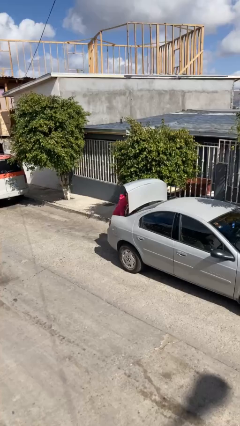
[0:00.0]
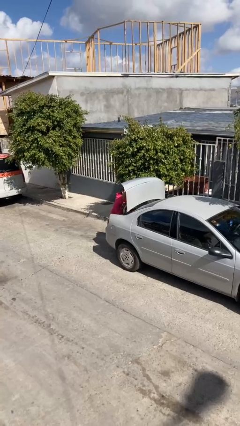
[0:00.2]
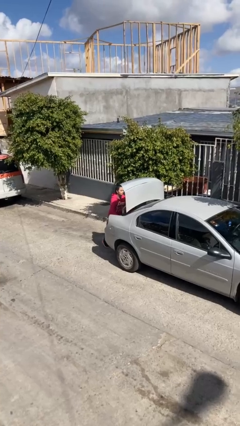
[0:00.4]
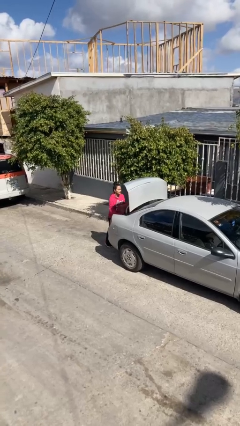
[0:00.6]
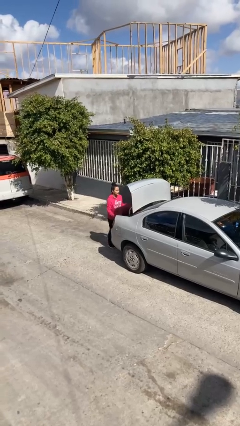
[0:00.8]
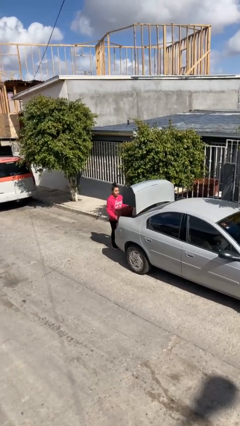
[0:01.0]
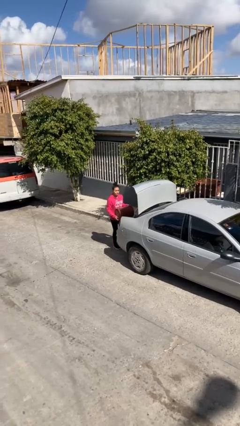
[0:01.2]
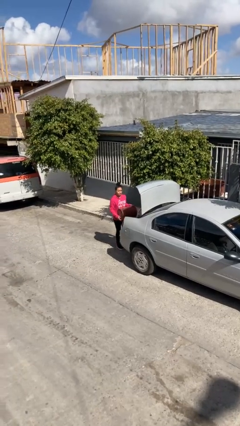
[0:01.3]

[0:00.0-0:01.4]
person unloads car

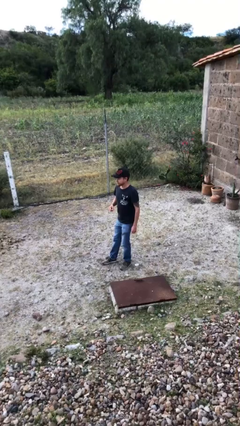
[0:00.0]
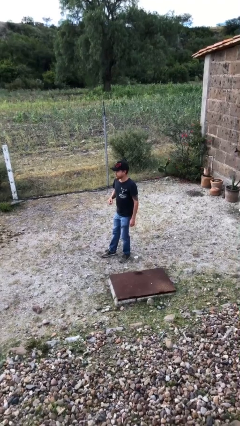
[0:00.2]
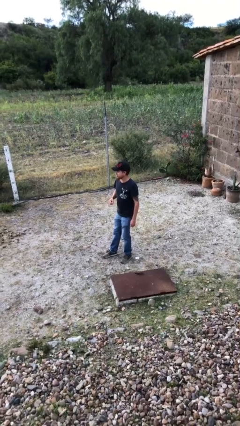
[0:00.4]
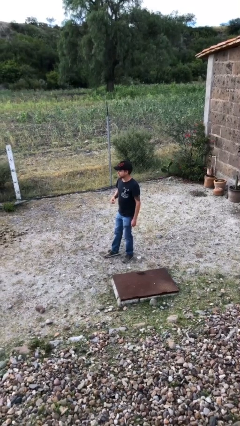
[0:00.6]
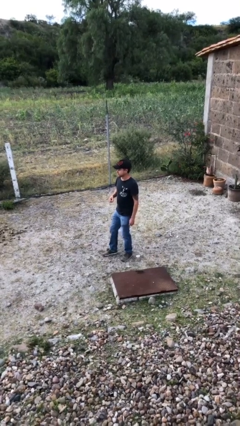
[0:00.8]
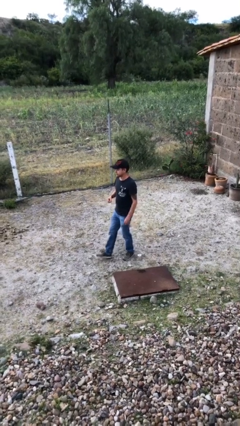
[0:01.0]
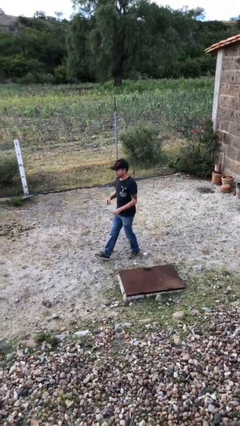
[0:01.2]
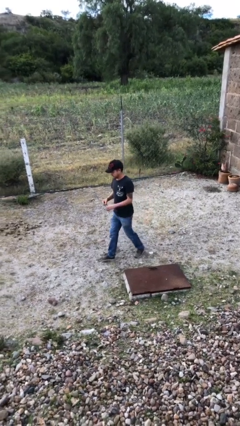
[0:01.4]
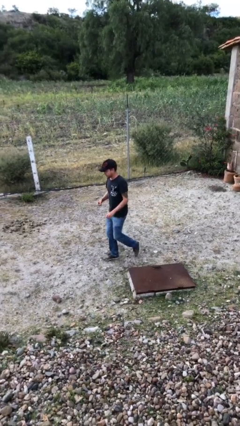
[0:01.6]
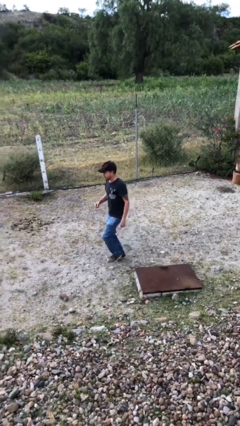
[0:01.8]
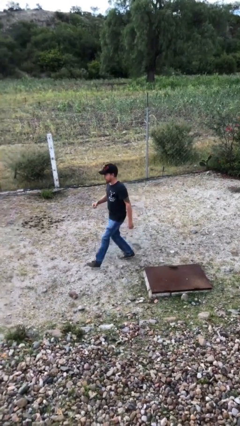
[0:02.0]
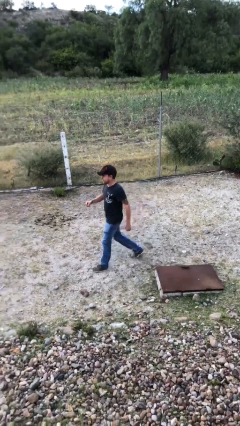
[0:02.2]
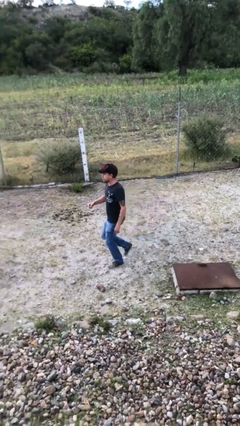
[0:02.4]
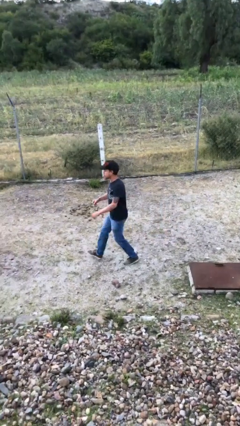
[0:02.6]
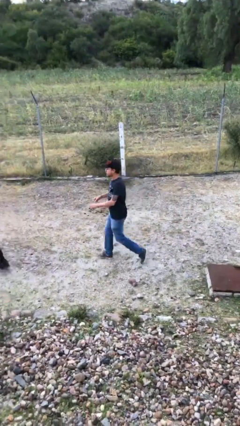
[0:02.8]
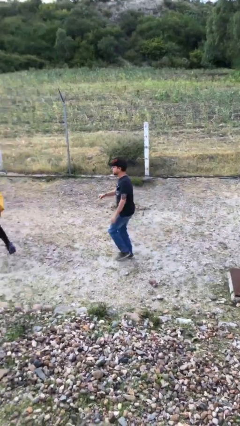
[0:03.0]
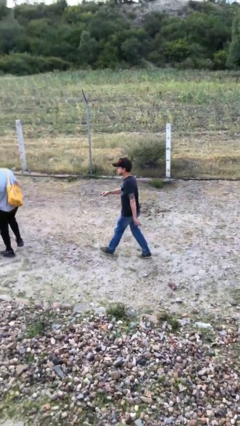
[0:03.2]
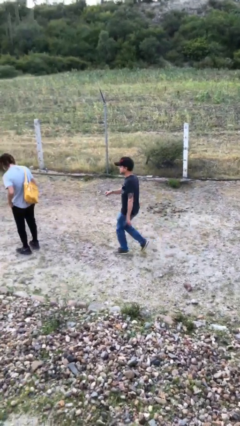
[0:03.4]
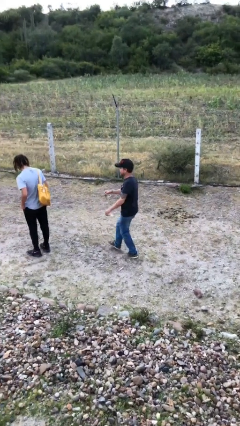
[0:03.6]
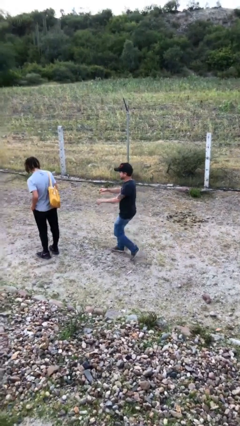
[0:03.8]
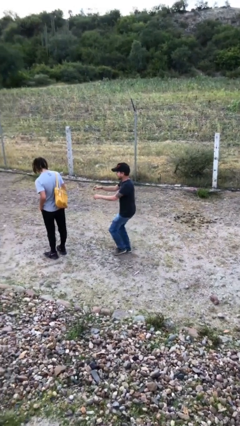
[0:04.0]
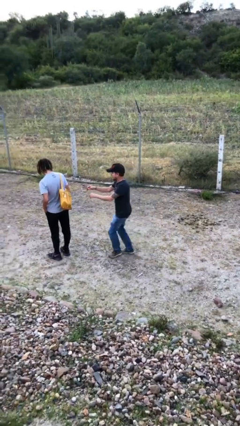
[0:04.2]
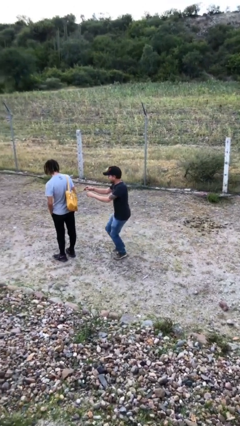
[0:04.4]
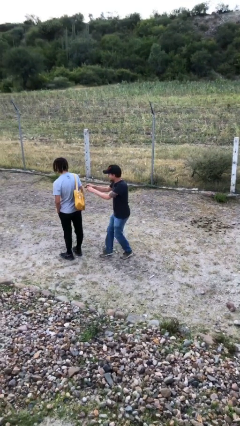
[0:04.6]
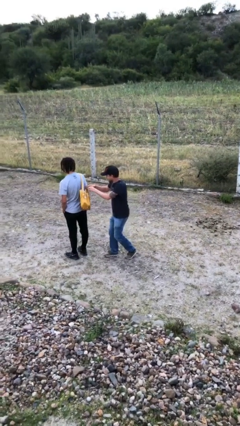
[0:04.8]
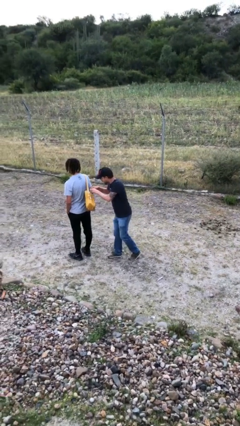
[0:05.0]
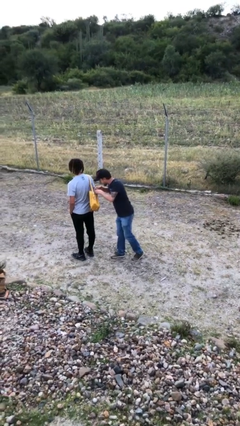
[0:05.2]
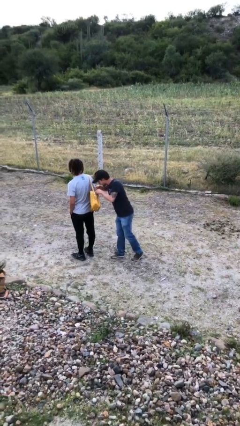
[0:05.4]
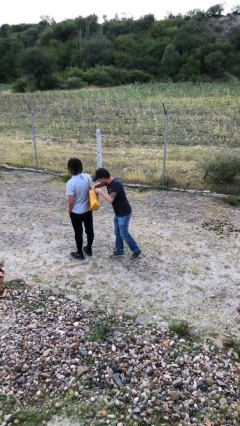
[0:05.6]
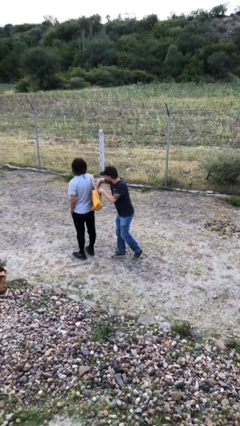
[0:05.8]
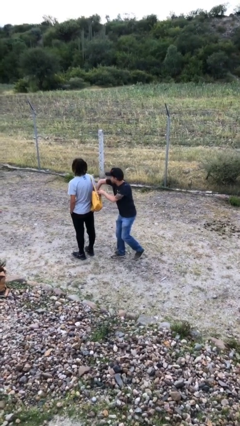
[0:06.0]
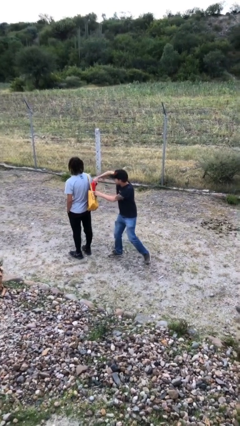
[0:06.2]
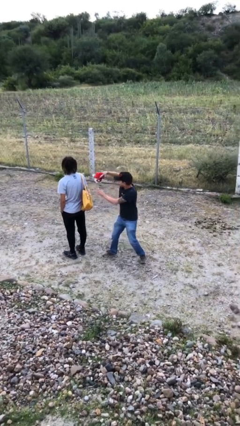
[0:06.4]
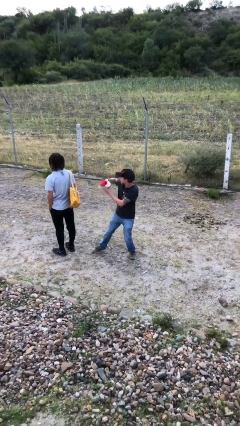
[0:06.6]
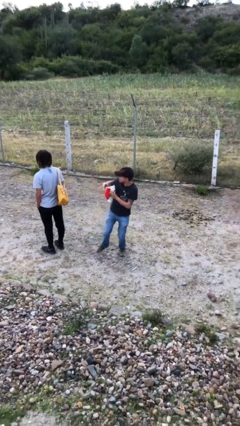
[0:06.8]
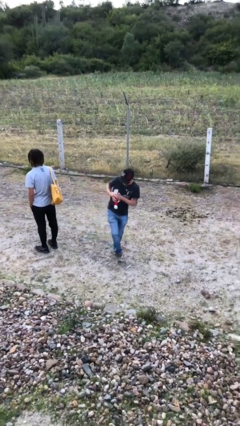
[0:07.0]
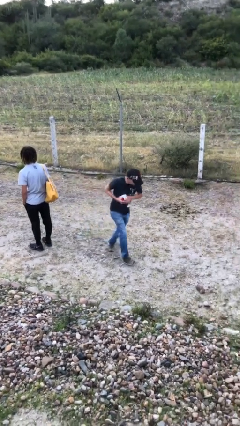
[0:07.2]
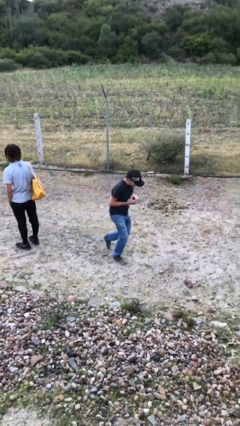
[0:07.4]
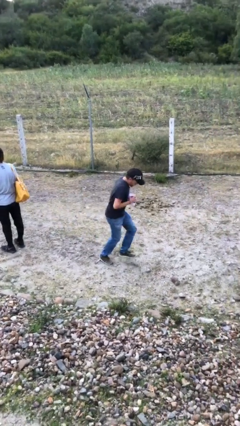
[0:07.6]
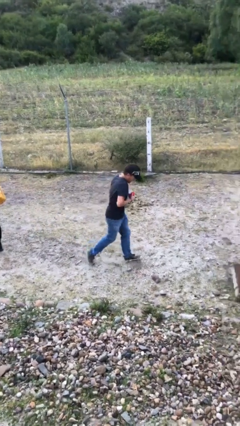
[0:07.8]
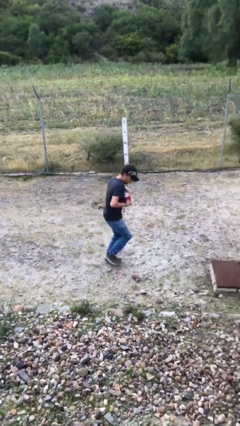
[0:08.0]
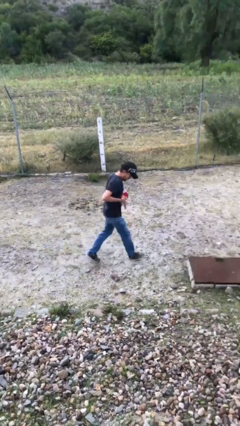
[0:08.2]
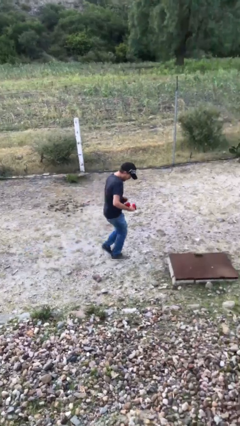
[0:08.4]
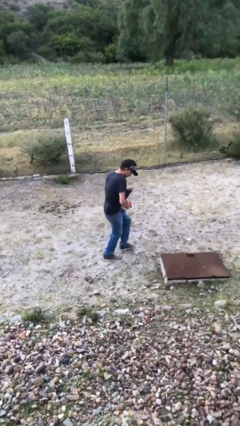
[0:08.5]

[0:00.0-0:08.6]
person steals object from person

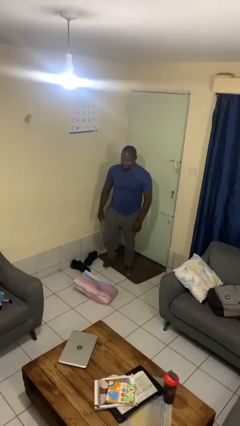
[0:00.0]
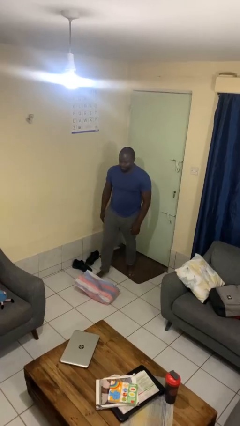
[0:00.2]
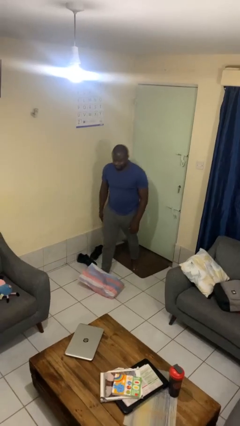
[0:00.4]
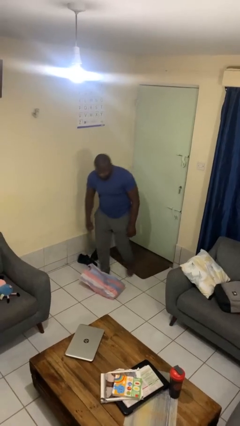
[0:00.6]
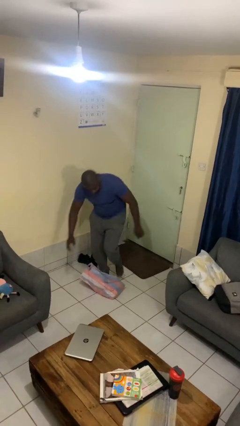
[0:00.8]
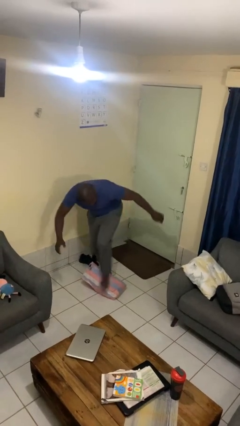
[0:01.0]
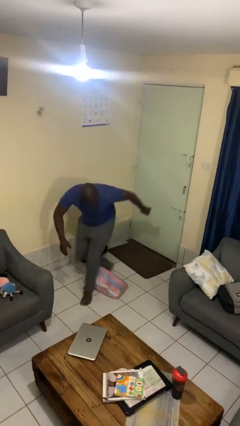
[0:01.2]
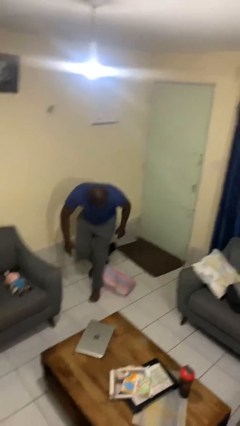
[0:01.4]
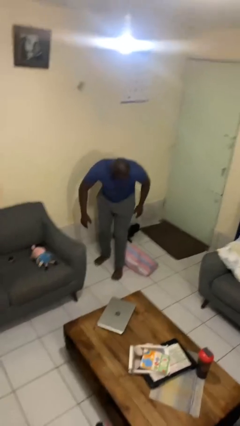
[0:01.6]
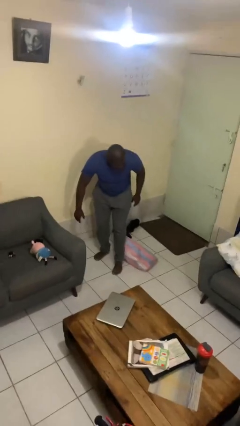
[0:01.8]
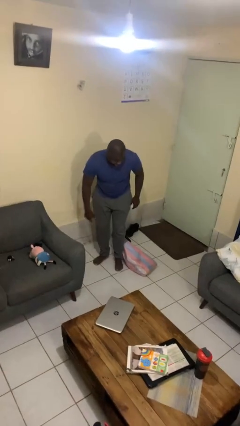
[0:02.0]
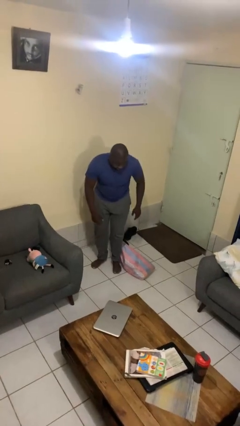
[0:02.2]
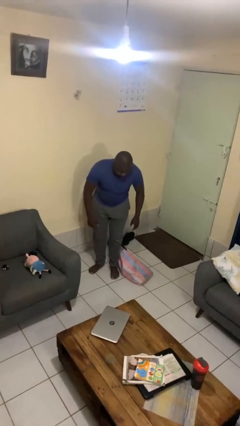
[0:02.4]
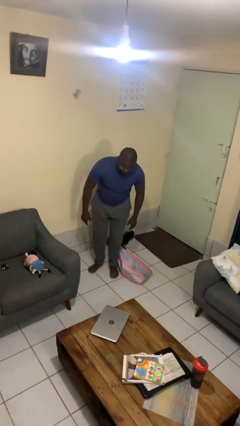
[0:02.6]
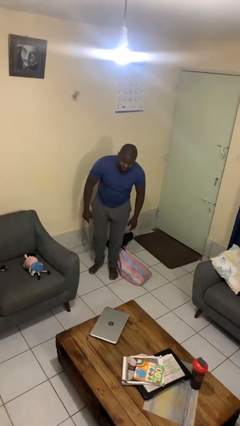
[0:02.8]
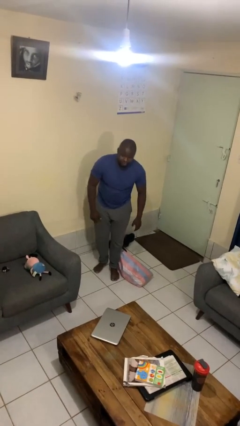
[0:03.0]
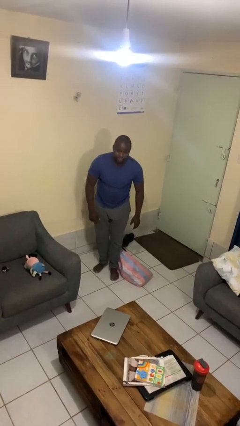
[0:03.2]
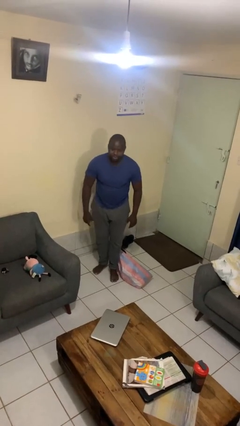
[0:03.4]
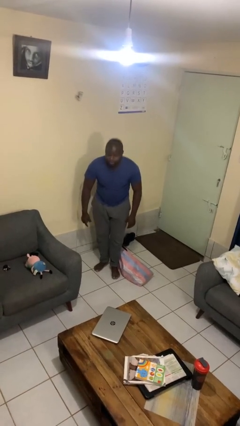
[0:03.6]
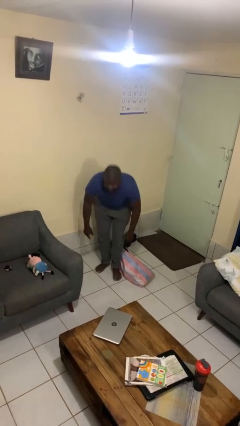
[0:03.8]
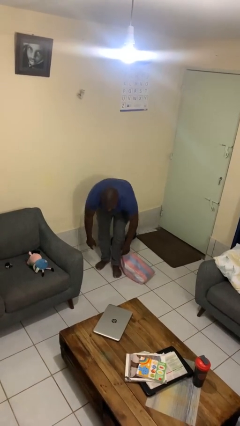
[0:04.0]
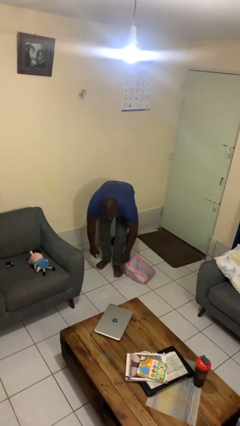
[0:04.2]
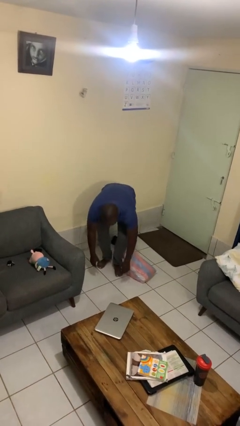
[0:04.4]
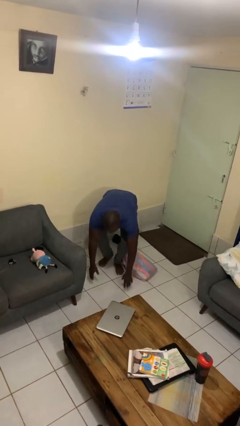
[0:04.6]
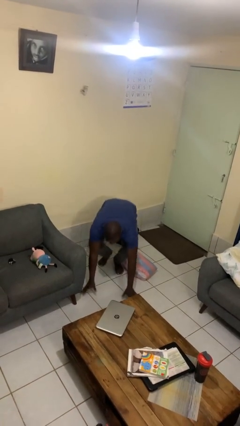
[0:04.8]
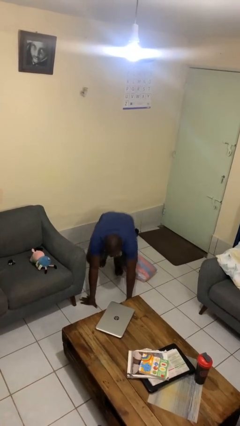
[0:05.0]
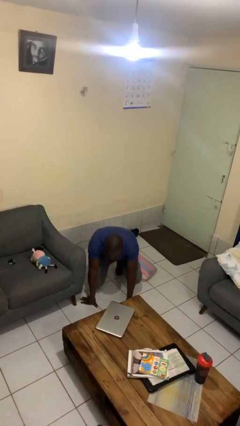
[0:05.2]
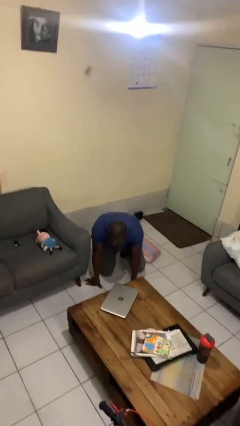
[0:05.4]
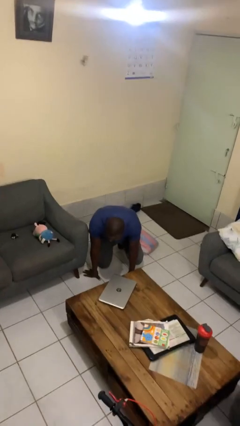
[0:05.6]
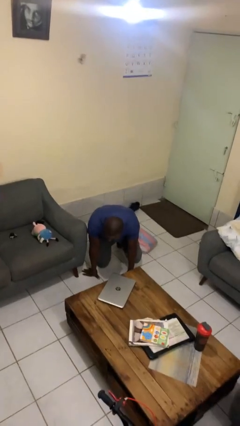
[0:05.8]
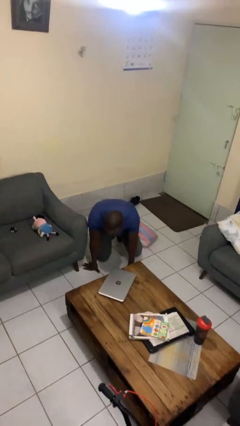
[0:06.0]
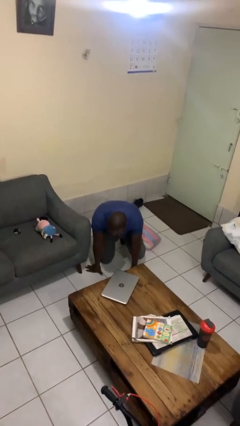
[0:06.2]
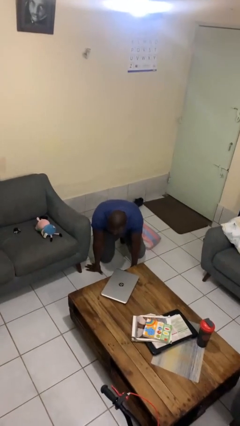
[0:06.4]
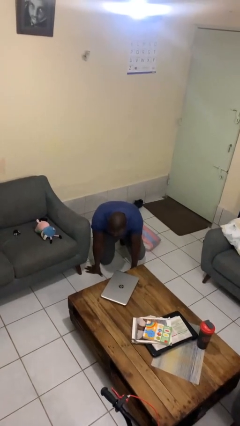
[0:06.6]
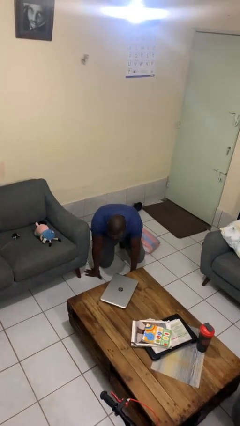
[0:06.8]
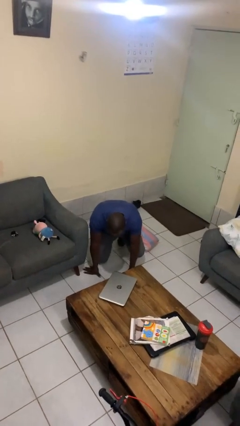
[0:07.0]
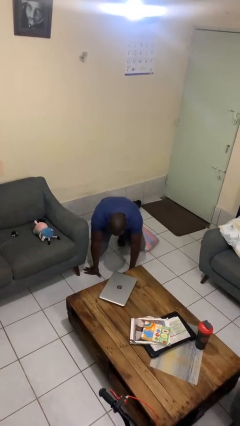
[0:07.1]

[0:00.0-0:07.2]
person trips on object on floor

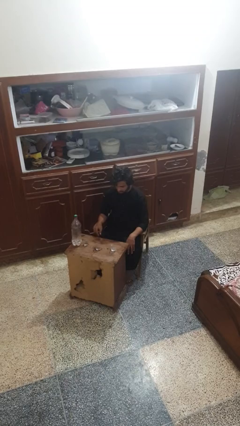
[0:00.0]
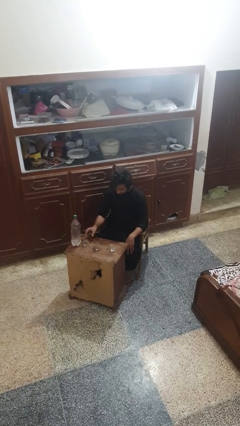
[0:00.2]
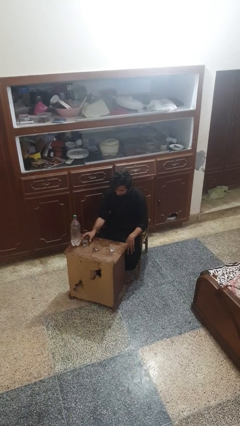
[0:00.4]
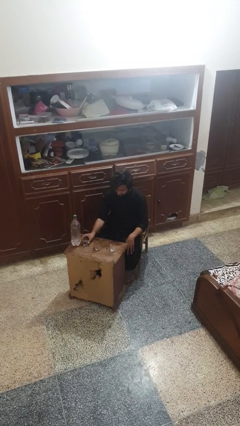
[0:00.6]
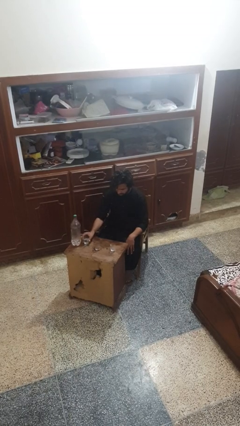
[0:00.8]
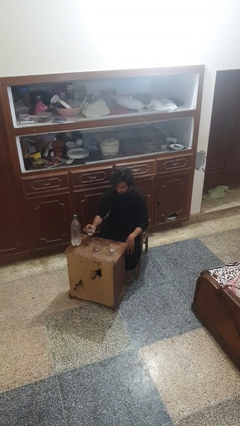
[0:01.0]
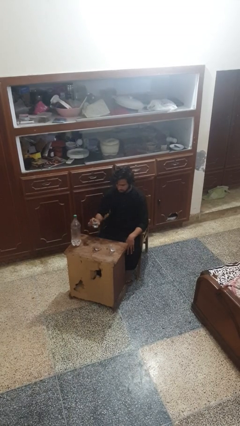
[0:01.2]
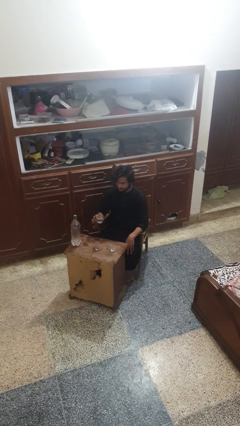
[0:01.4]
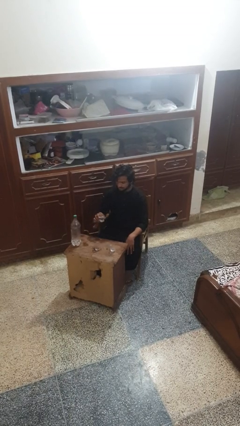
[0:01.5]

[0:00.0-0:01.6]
person picks up object from table
